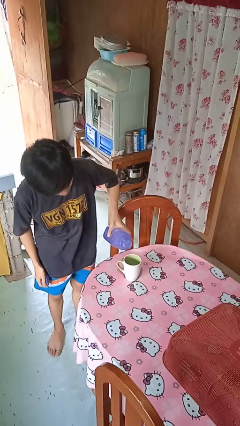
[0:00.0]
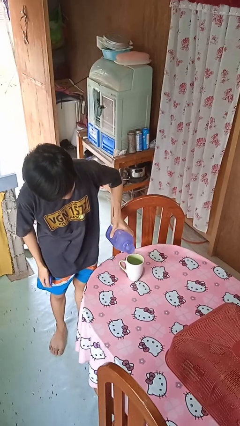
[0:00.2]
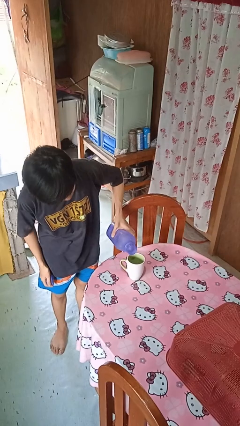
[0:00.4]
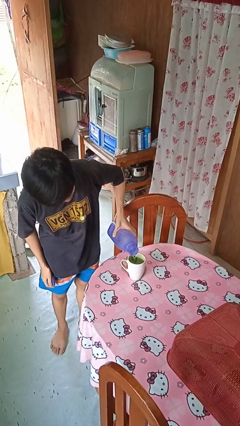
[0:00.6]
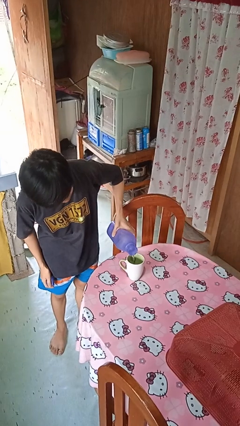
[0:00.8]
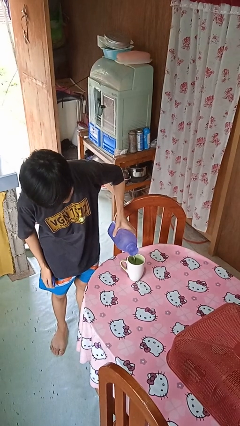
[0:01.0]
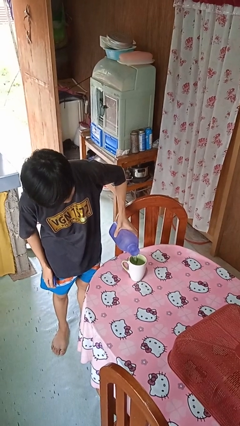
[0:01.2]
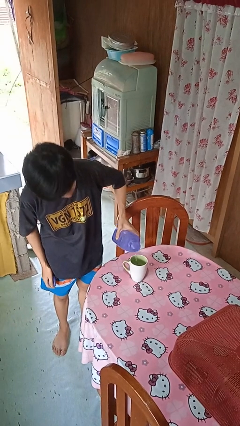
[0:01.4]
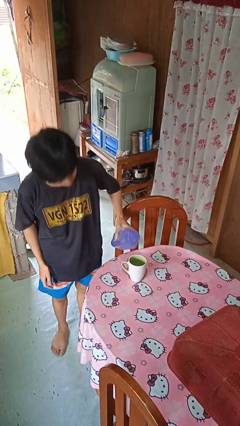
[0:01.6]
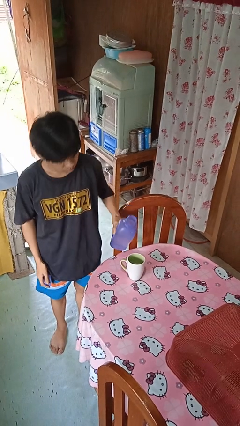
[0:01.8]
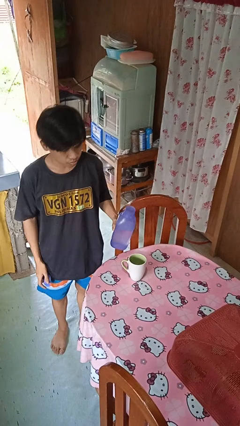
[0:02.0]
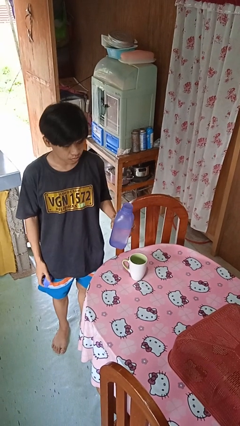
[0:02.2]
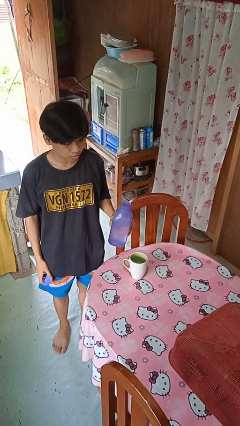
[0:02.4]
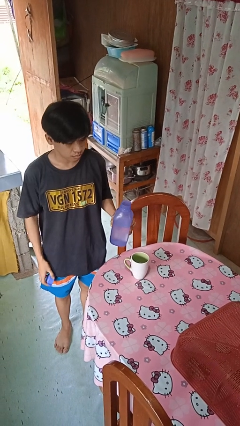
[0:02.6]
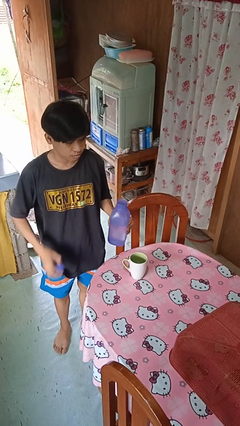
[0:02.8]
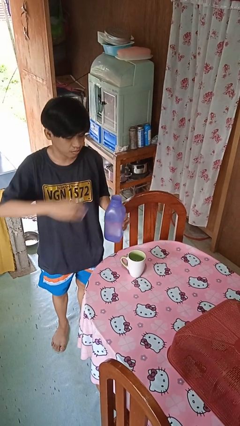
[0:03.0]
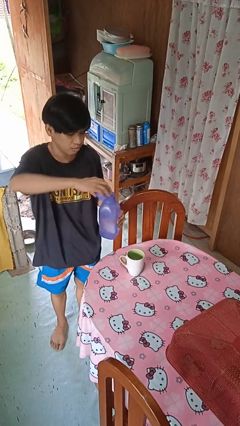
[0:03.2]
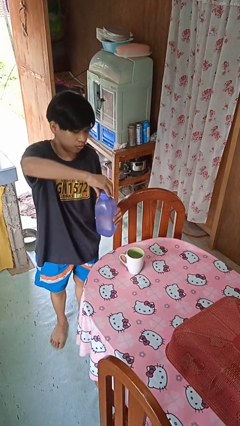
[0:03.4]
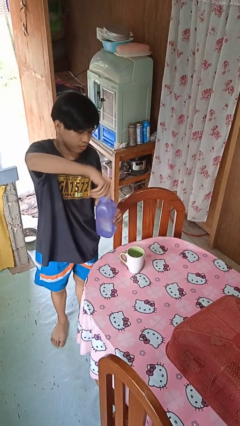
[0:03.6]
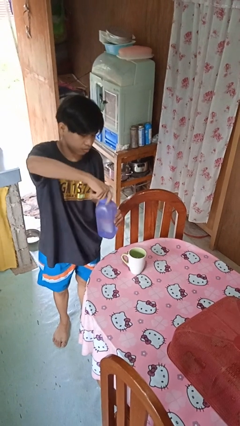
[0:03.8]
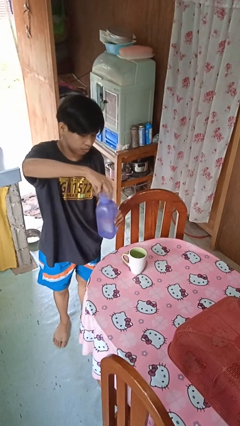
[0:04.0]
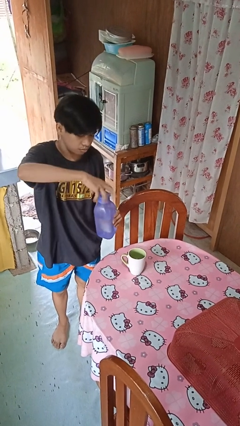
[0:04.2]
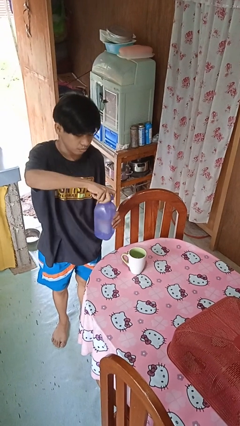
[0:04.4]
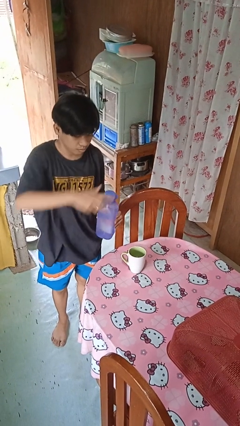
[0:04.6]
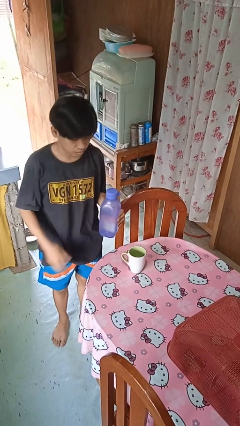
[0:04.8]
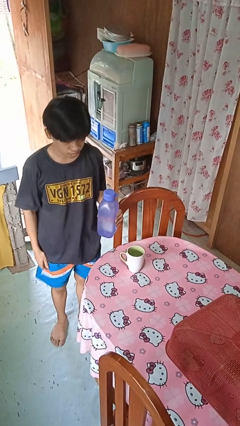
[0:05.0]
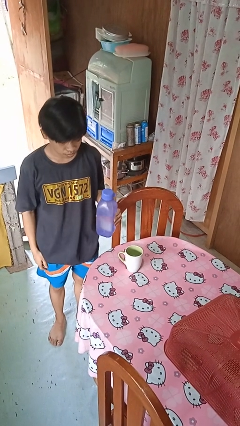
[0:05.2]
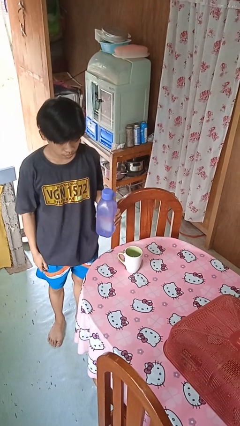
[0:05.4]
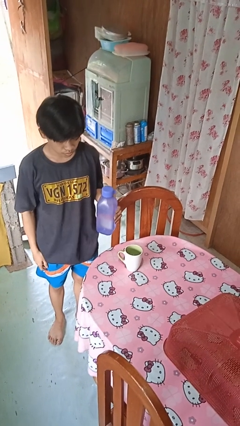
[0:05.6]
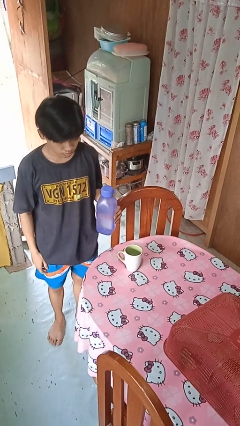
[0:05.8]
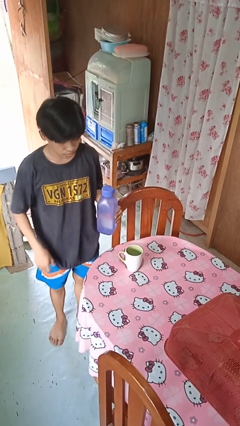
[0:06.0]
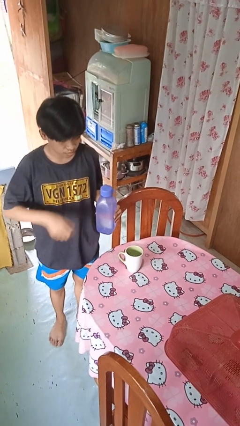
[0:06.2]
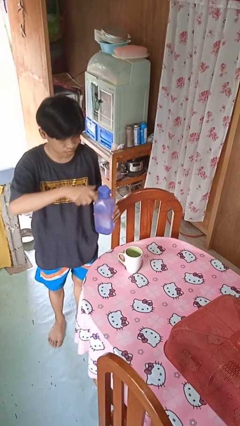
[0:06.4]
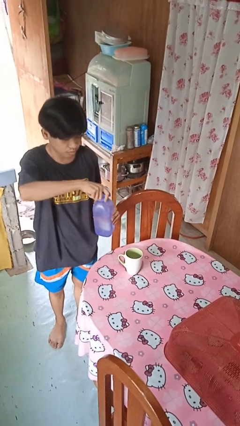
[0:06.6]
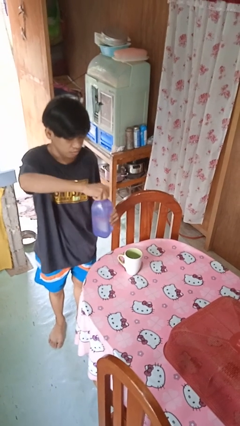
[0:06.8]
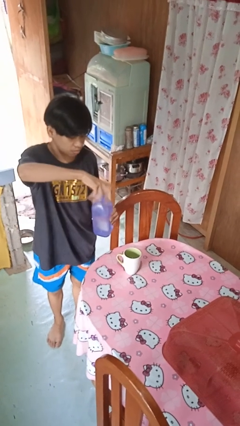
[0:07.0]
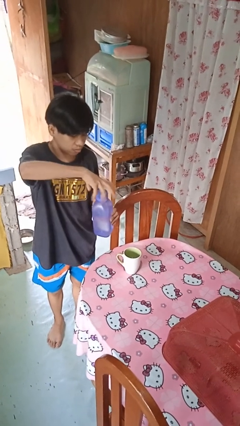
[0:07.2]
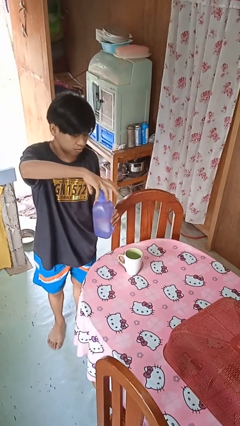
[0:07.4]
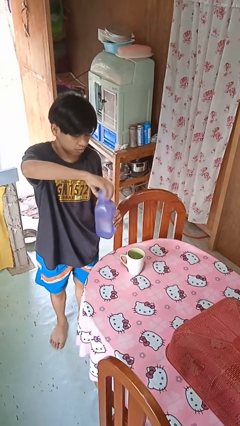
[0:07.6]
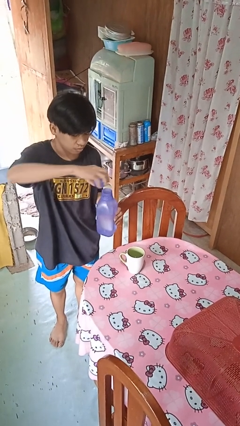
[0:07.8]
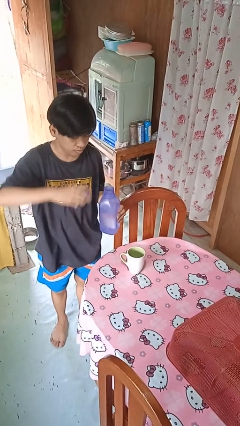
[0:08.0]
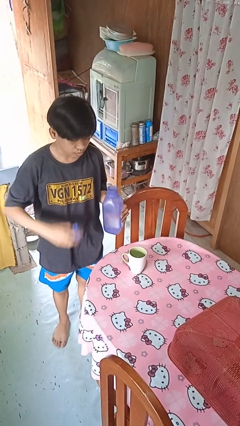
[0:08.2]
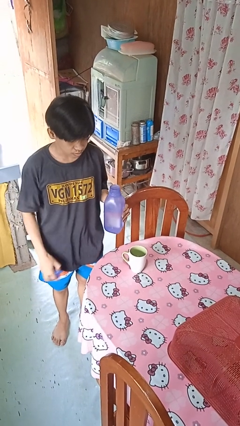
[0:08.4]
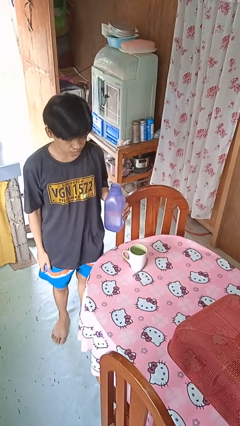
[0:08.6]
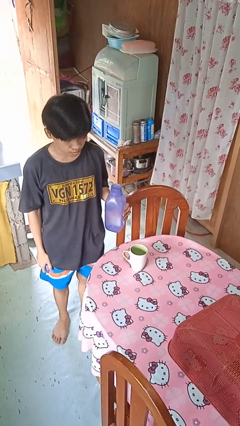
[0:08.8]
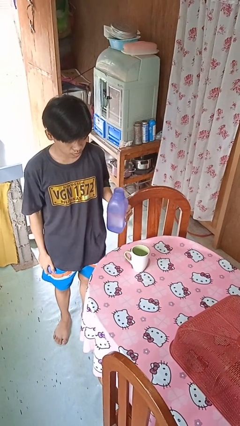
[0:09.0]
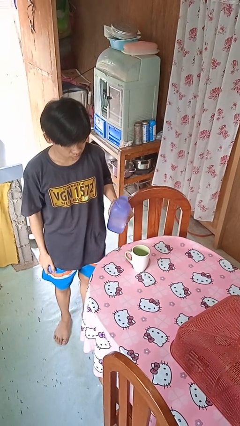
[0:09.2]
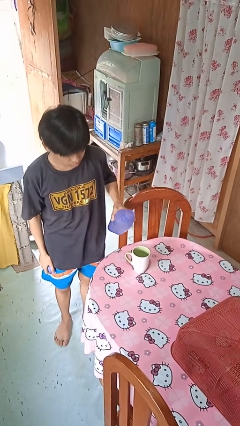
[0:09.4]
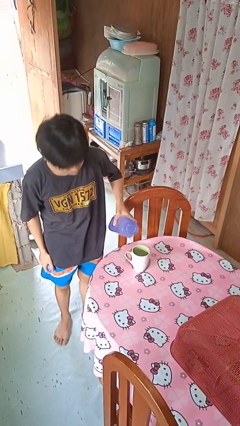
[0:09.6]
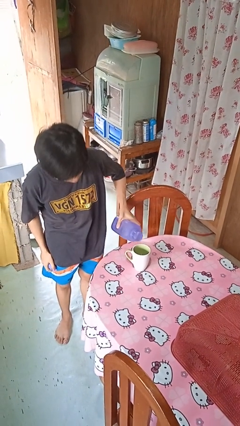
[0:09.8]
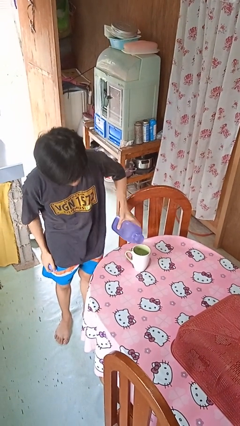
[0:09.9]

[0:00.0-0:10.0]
person pours liquid into cup

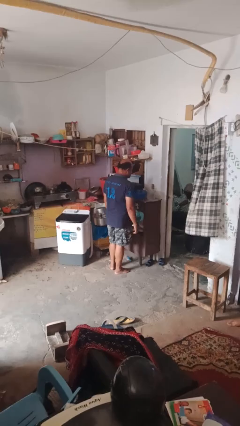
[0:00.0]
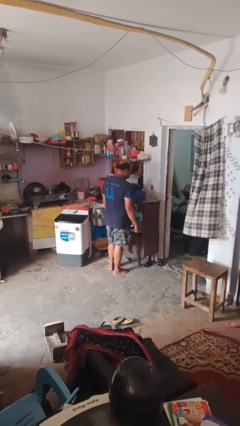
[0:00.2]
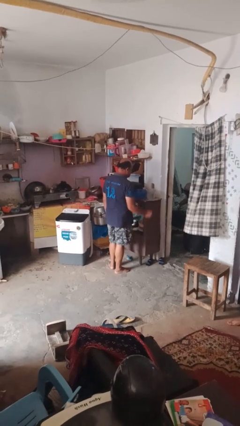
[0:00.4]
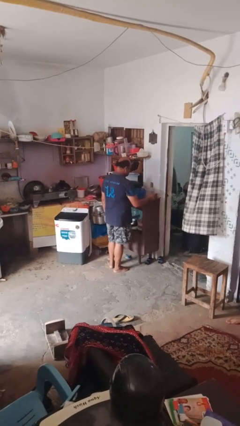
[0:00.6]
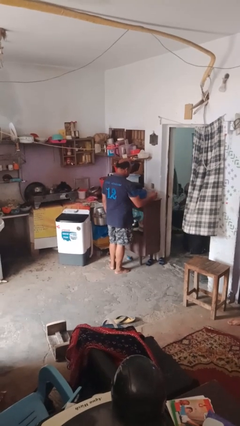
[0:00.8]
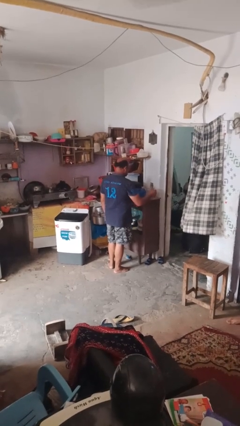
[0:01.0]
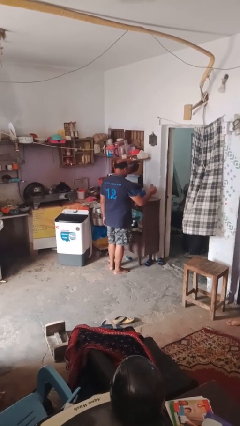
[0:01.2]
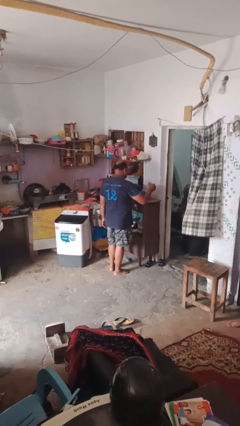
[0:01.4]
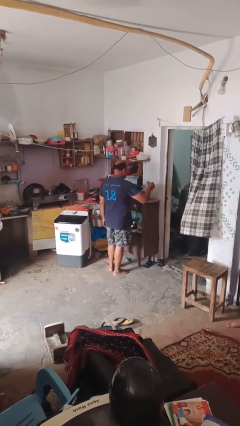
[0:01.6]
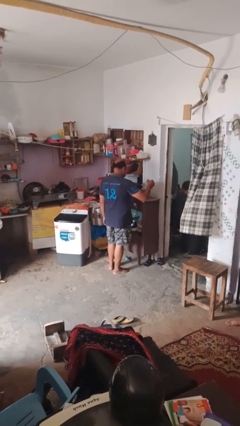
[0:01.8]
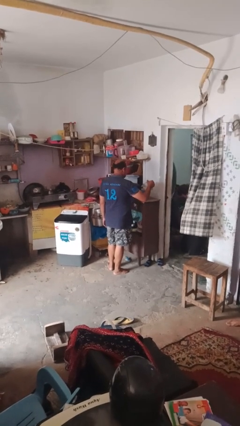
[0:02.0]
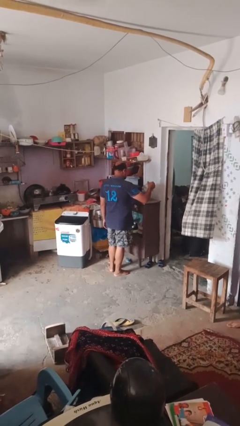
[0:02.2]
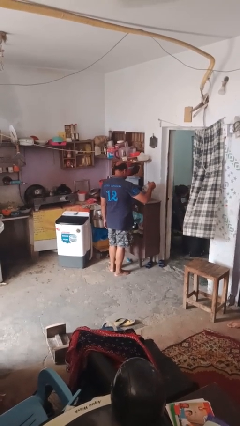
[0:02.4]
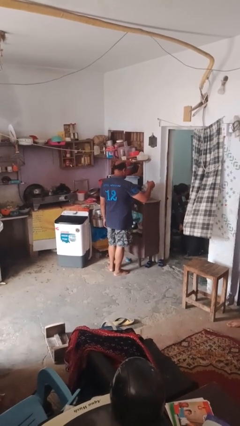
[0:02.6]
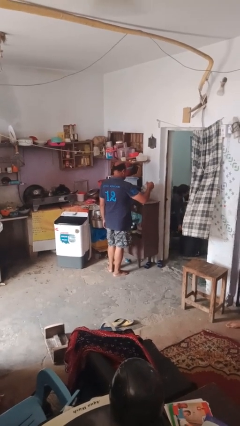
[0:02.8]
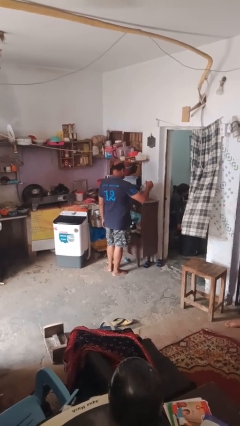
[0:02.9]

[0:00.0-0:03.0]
person pours into bowl

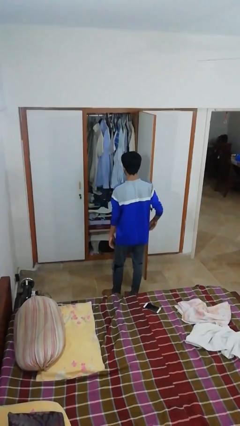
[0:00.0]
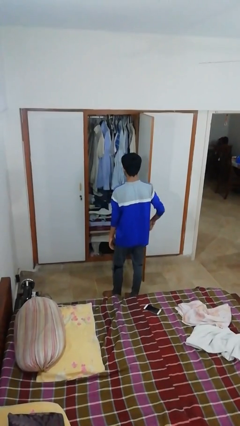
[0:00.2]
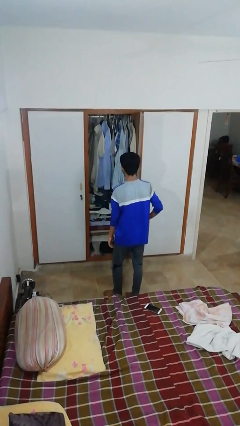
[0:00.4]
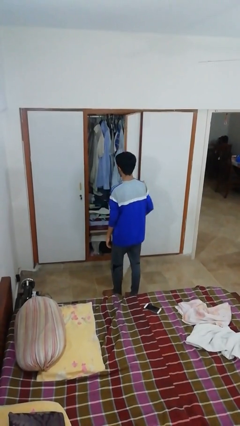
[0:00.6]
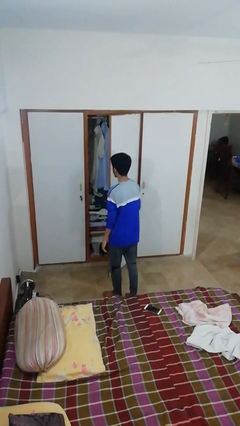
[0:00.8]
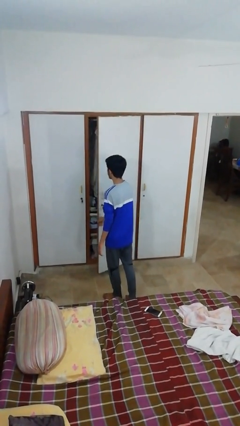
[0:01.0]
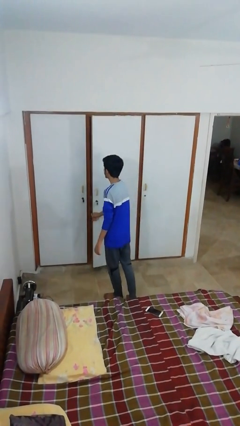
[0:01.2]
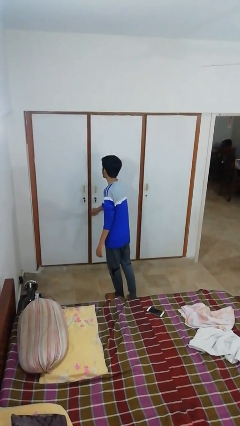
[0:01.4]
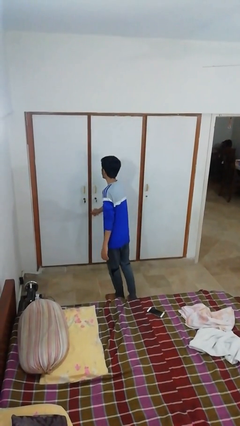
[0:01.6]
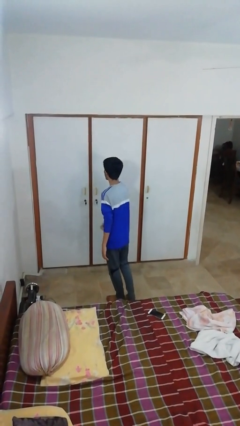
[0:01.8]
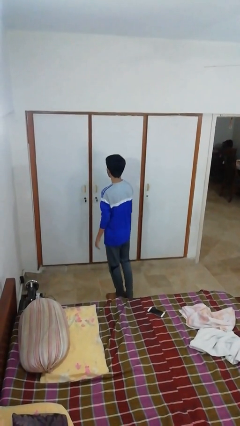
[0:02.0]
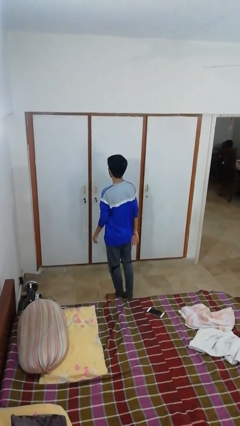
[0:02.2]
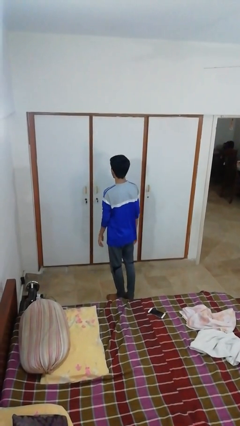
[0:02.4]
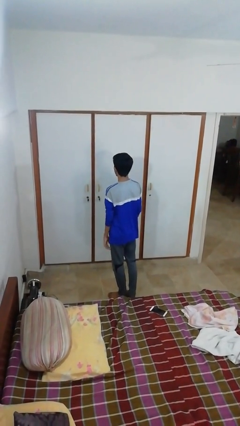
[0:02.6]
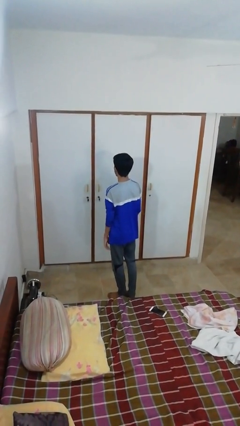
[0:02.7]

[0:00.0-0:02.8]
person closes closet door

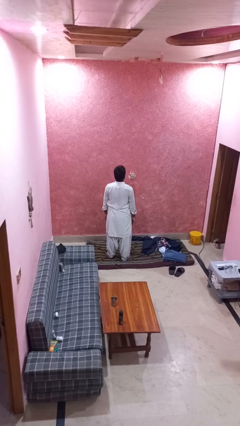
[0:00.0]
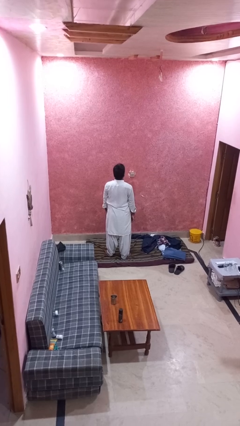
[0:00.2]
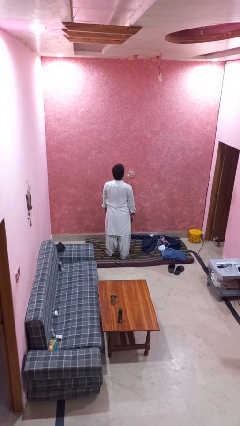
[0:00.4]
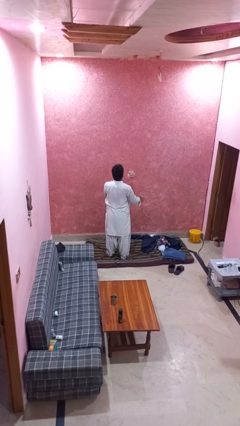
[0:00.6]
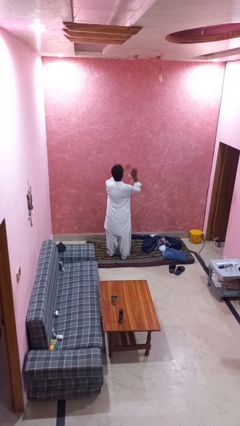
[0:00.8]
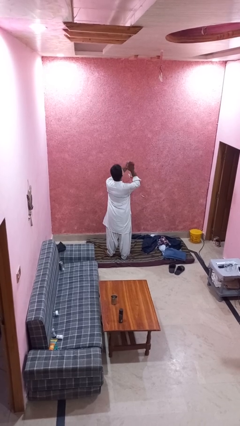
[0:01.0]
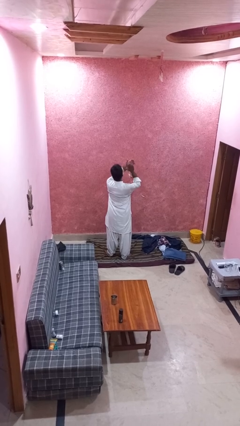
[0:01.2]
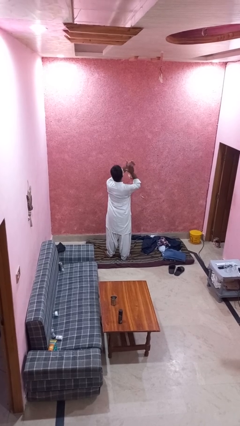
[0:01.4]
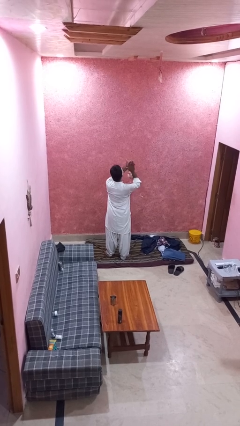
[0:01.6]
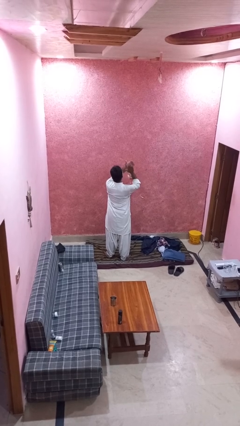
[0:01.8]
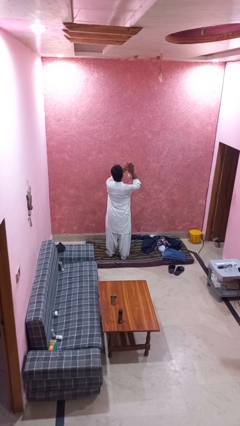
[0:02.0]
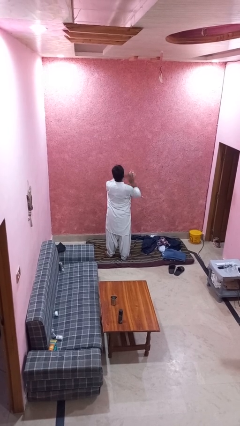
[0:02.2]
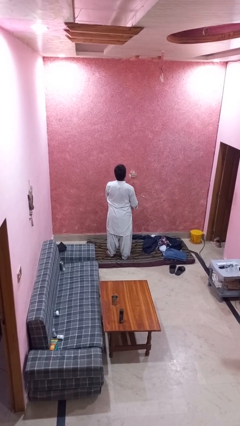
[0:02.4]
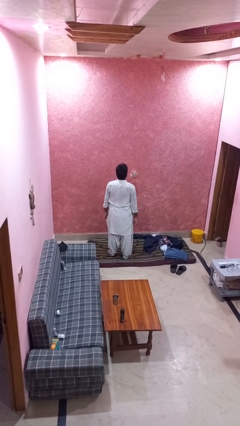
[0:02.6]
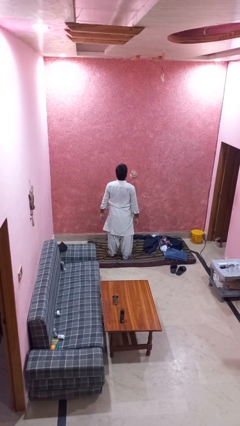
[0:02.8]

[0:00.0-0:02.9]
person claps hands
